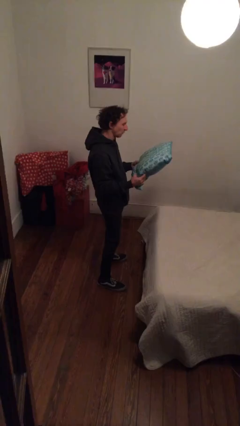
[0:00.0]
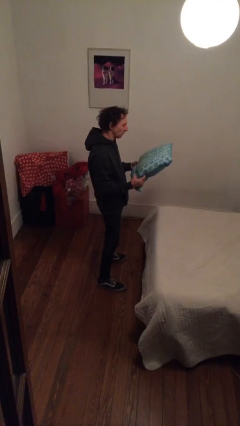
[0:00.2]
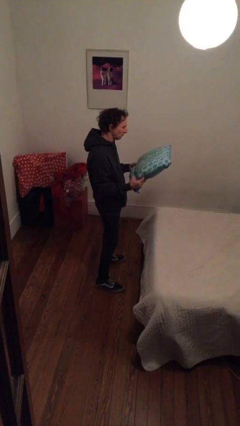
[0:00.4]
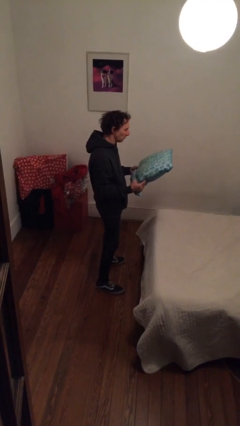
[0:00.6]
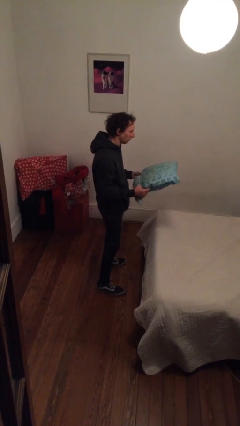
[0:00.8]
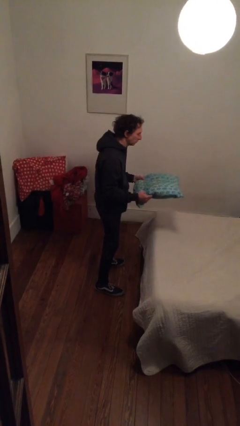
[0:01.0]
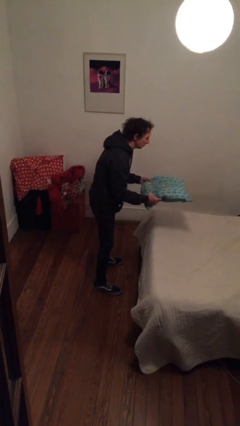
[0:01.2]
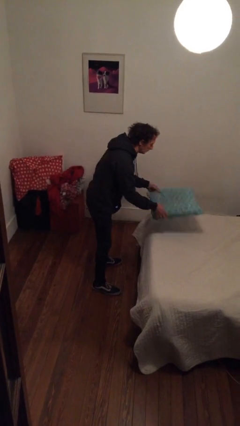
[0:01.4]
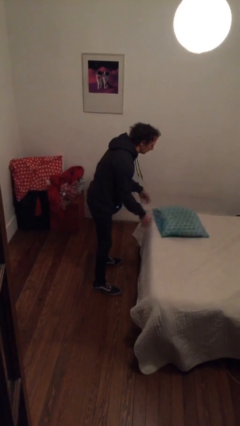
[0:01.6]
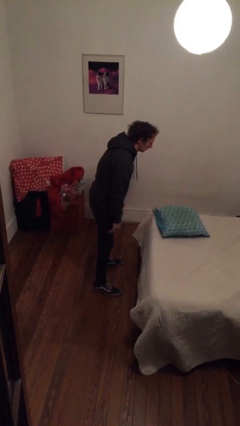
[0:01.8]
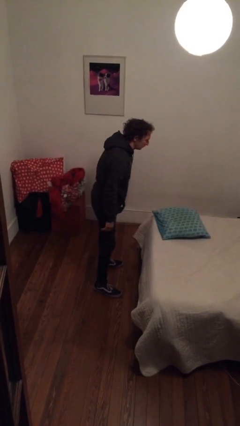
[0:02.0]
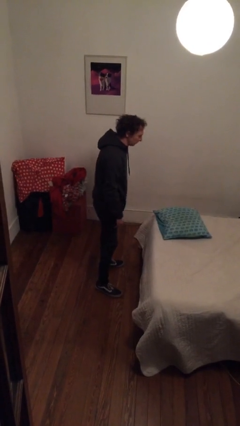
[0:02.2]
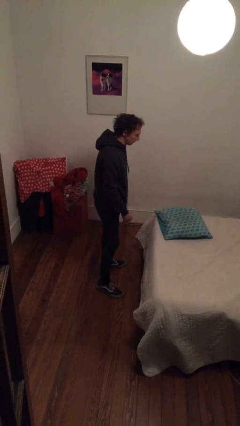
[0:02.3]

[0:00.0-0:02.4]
person puts down object on bed

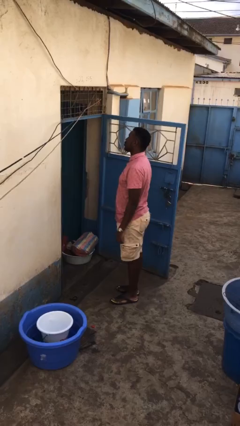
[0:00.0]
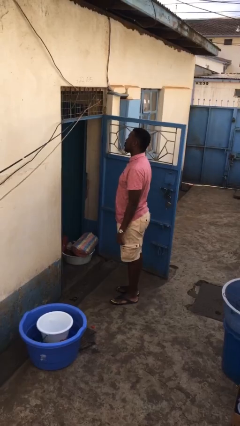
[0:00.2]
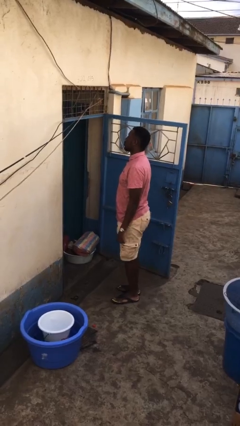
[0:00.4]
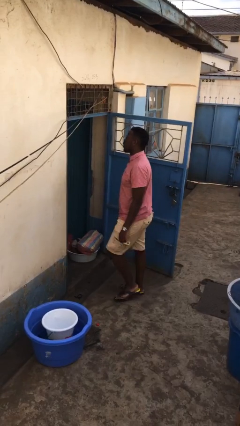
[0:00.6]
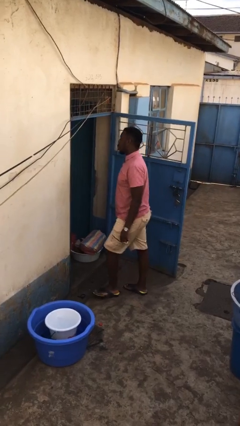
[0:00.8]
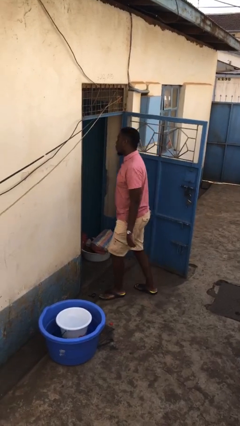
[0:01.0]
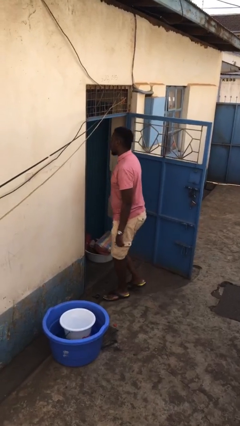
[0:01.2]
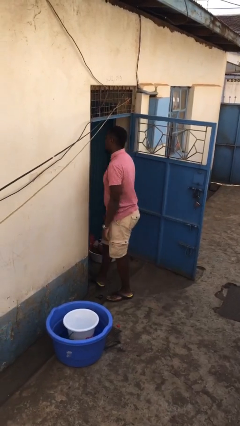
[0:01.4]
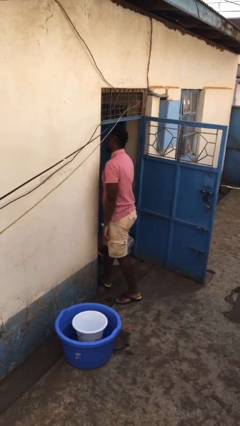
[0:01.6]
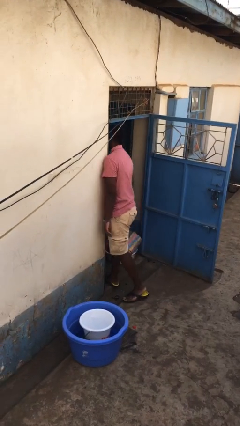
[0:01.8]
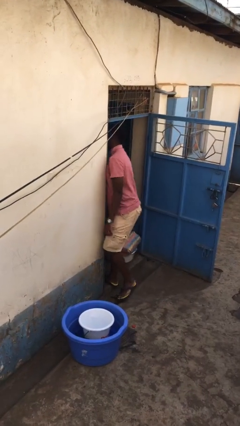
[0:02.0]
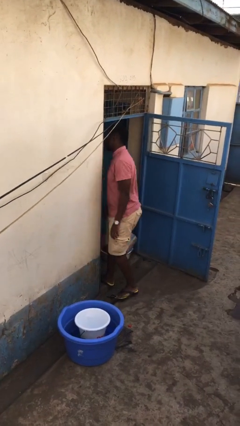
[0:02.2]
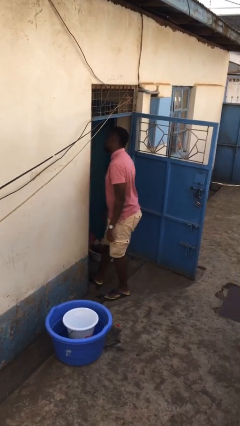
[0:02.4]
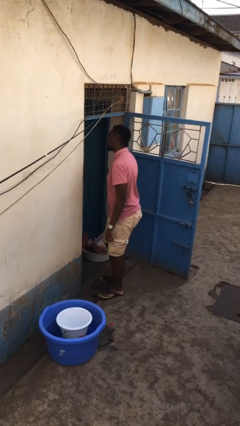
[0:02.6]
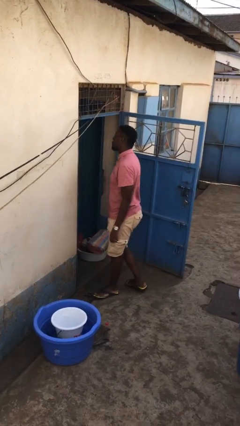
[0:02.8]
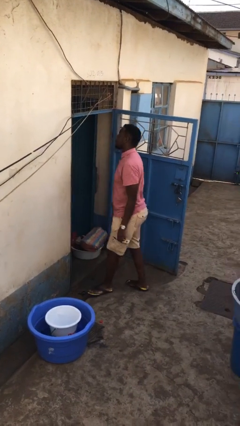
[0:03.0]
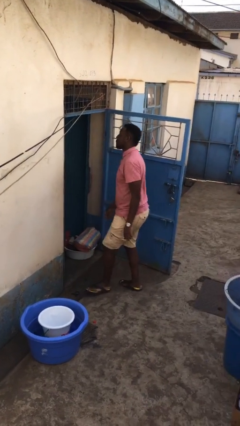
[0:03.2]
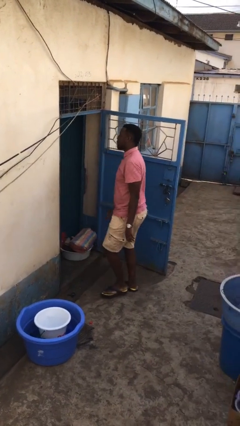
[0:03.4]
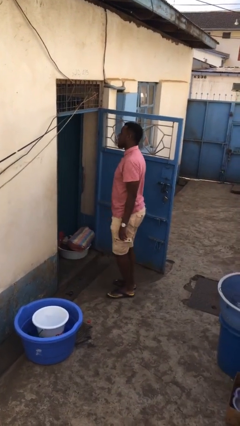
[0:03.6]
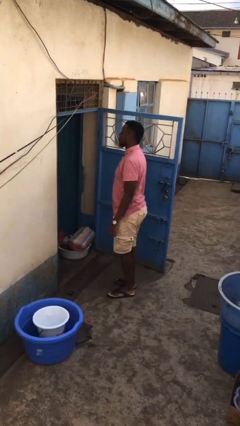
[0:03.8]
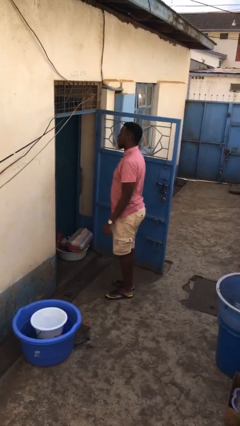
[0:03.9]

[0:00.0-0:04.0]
person bumps into wall

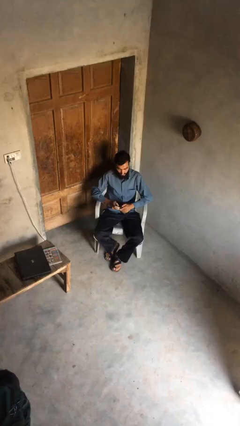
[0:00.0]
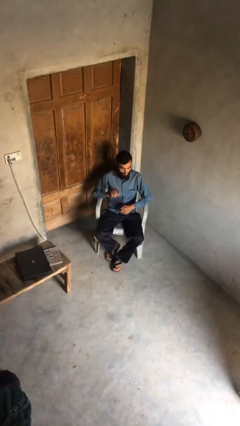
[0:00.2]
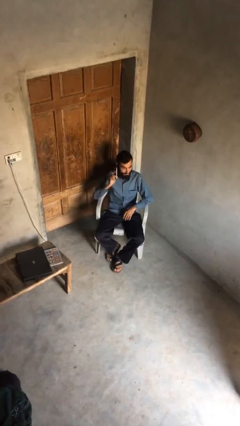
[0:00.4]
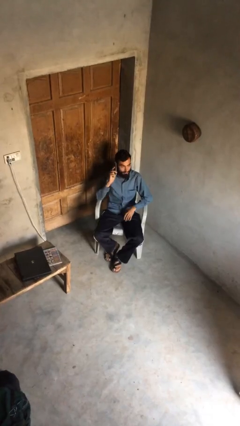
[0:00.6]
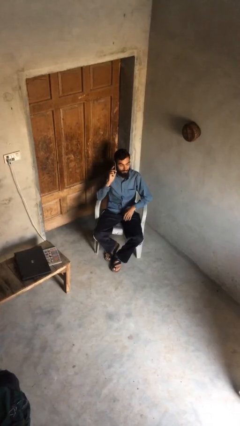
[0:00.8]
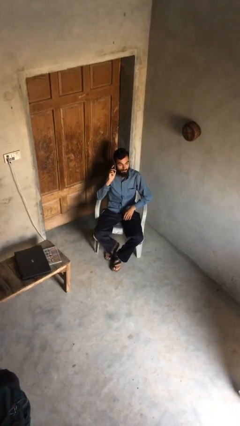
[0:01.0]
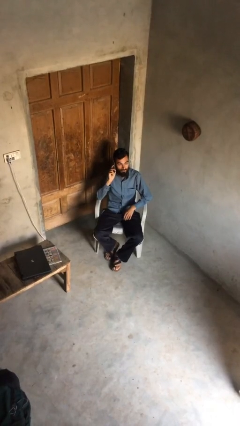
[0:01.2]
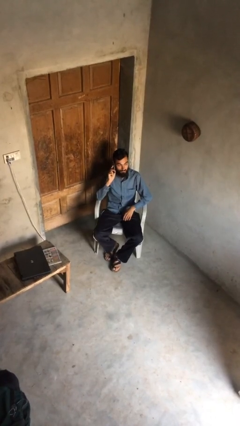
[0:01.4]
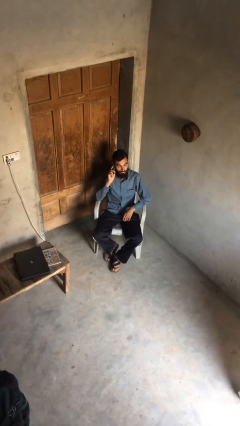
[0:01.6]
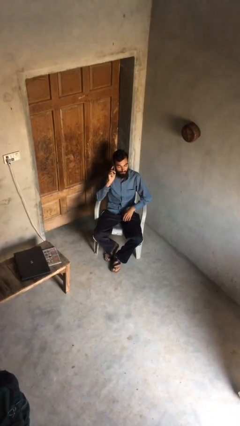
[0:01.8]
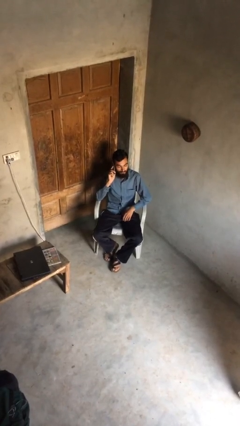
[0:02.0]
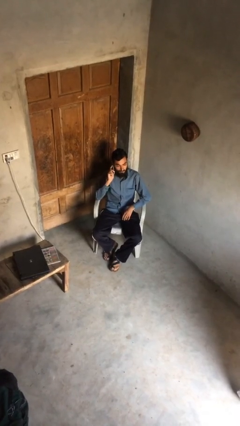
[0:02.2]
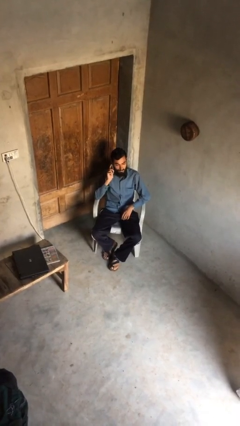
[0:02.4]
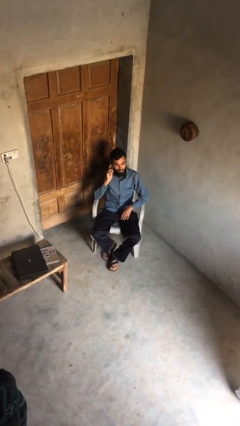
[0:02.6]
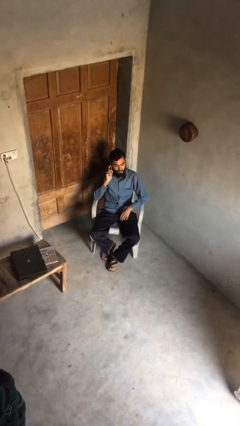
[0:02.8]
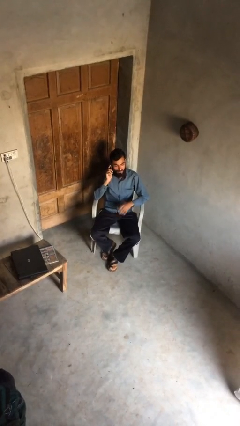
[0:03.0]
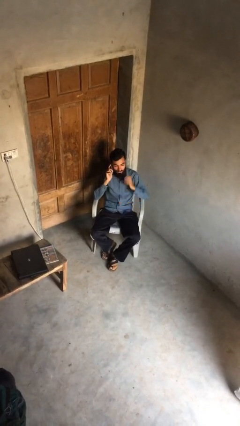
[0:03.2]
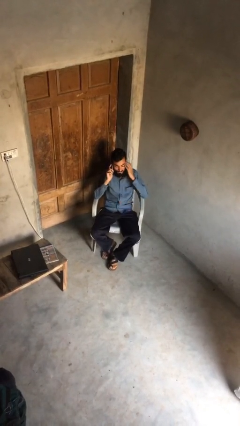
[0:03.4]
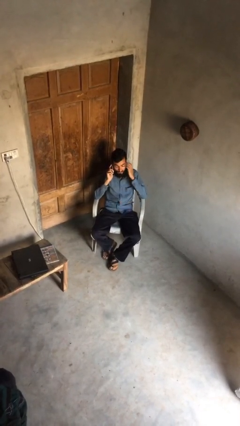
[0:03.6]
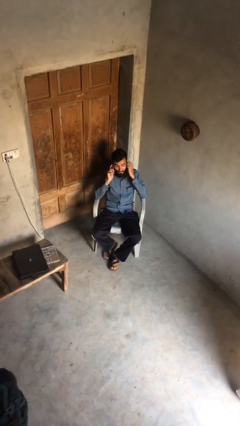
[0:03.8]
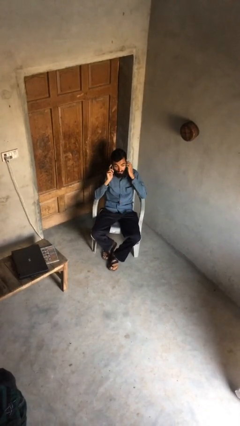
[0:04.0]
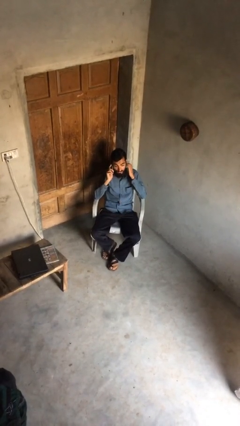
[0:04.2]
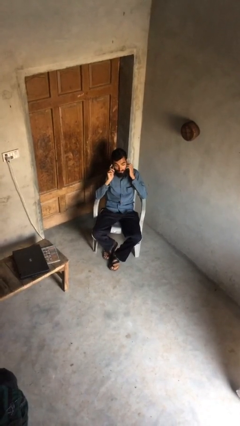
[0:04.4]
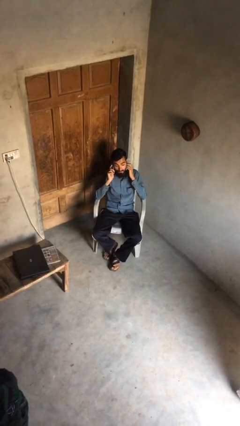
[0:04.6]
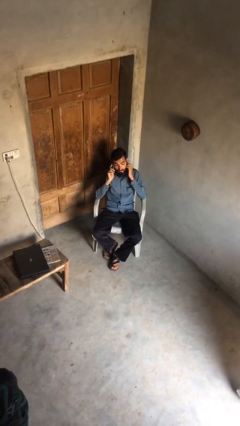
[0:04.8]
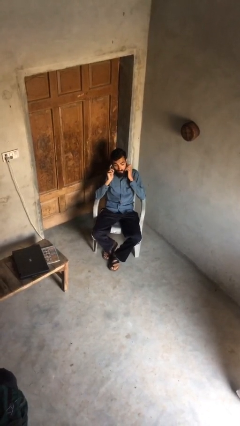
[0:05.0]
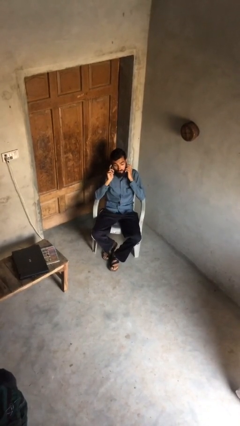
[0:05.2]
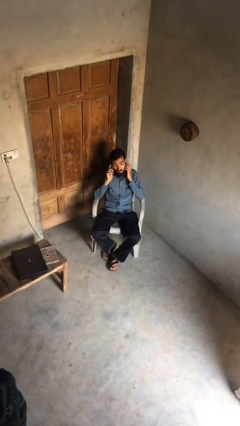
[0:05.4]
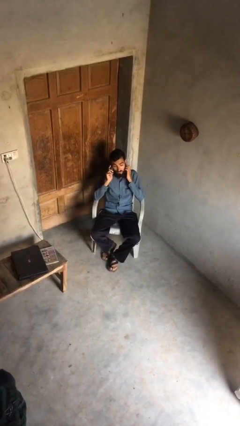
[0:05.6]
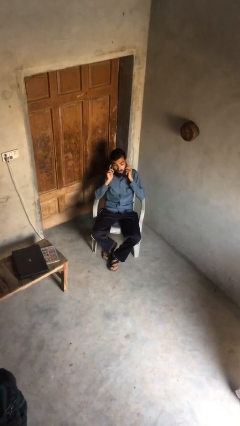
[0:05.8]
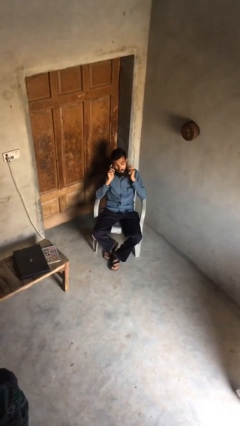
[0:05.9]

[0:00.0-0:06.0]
person talks on phone

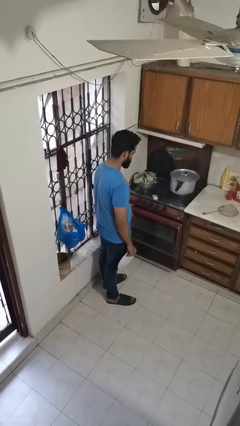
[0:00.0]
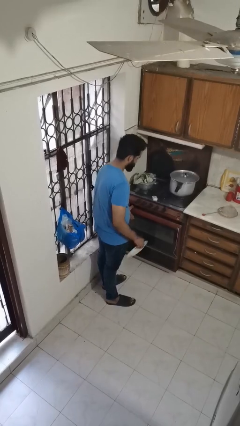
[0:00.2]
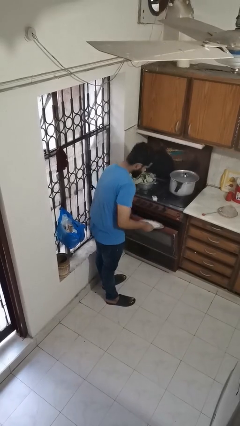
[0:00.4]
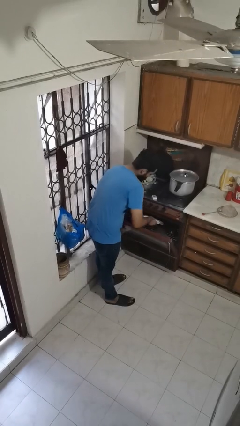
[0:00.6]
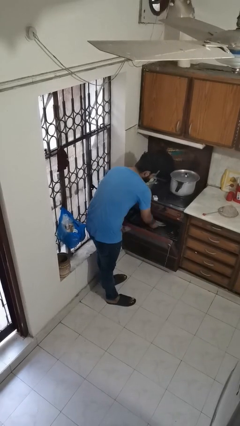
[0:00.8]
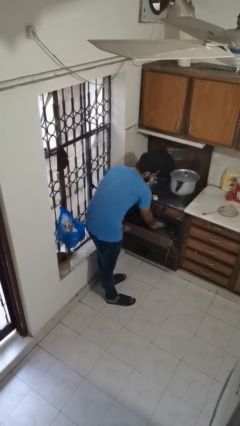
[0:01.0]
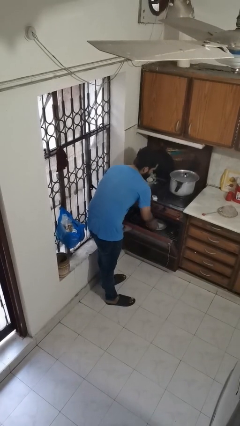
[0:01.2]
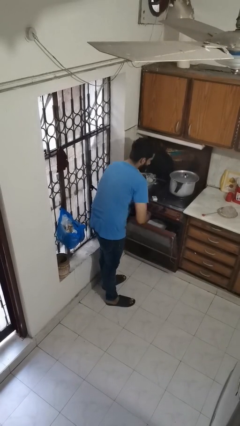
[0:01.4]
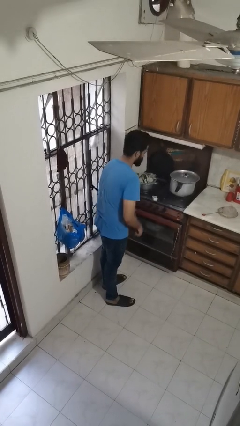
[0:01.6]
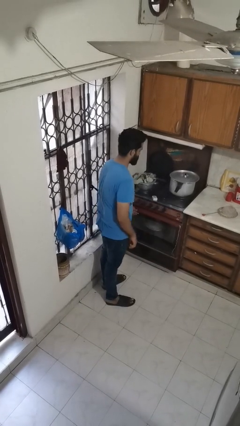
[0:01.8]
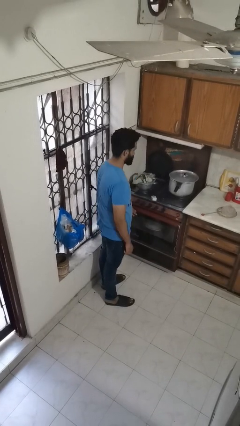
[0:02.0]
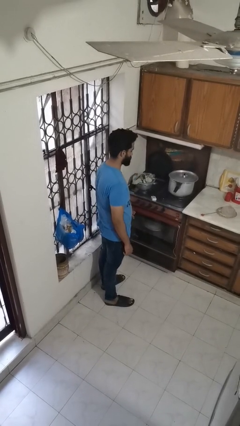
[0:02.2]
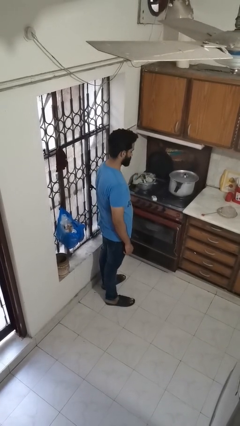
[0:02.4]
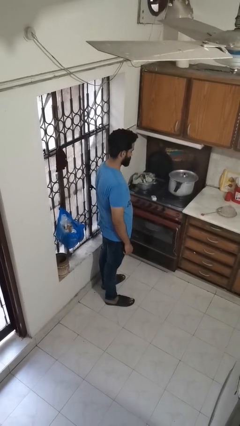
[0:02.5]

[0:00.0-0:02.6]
person puts object into oven

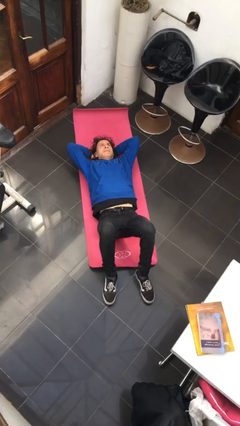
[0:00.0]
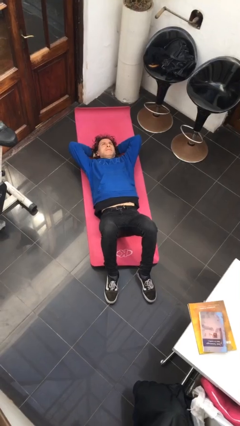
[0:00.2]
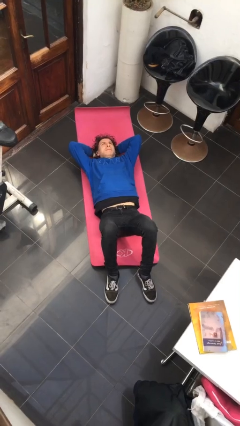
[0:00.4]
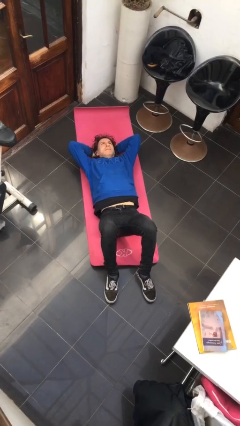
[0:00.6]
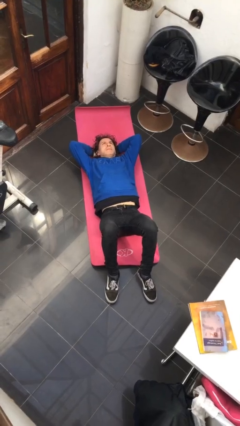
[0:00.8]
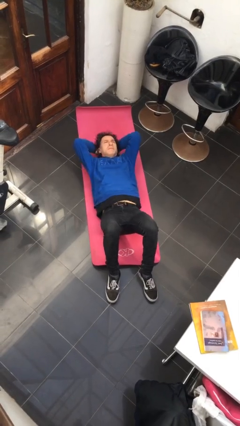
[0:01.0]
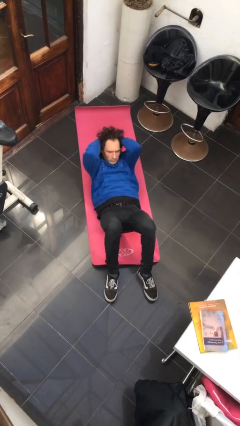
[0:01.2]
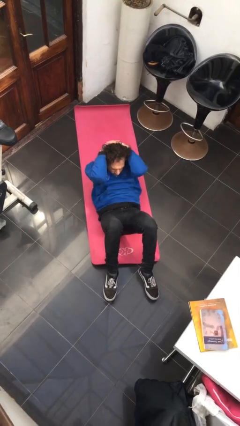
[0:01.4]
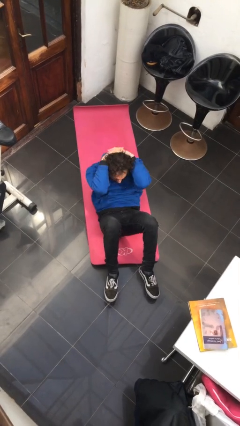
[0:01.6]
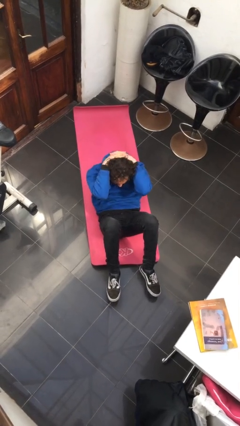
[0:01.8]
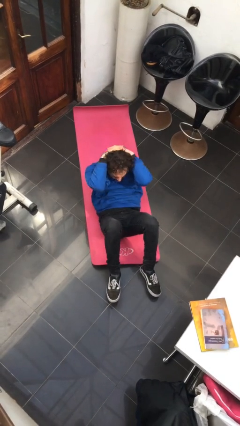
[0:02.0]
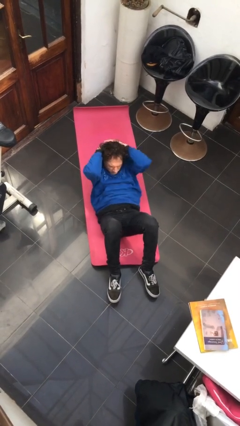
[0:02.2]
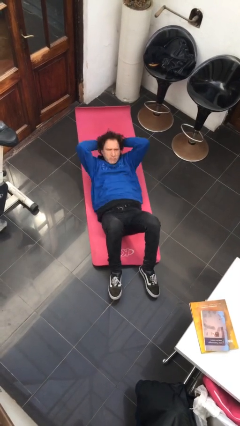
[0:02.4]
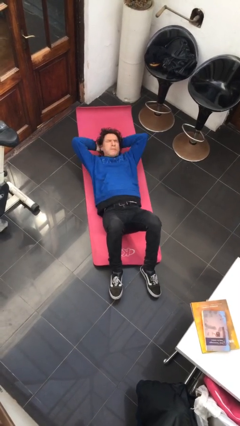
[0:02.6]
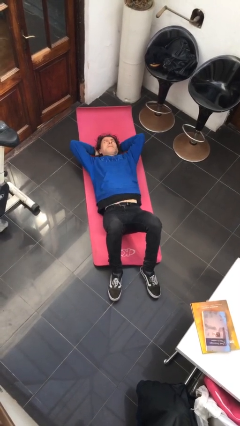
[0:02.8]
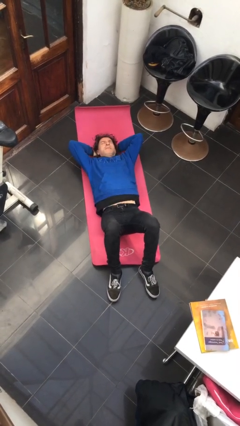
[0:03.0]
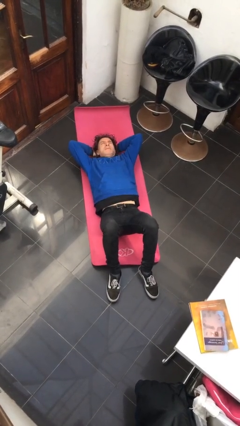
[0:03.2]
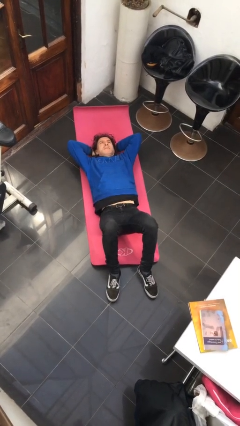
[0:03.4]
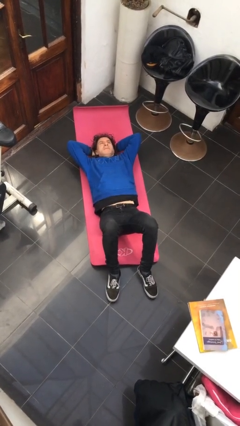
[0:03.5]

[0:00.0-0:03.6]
person exercises with situp
